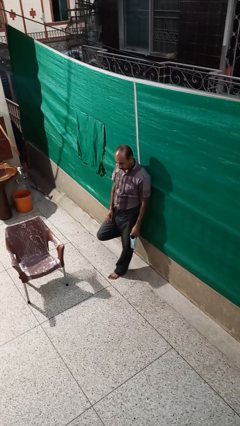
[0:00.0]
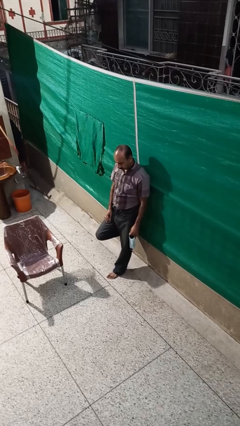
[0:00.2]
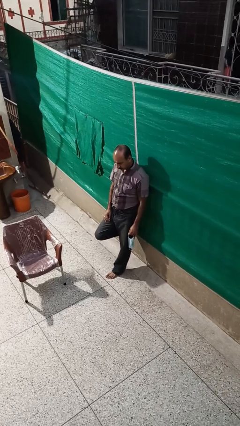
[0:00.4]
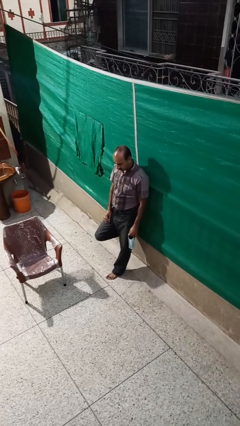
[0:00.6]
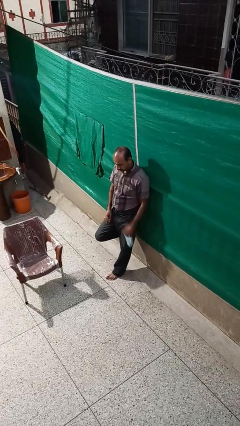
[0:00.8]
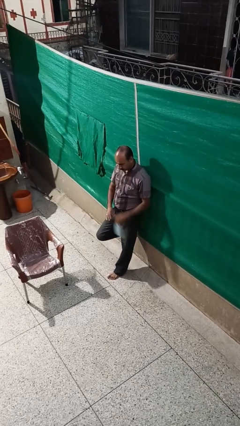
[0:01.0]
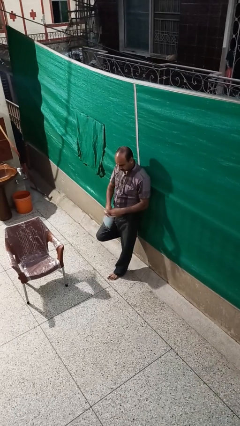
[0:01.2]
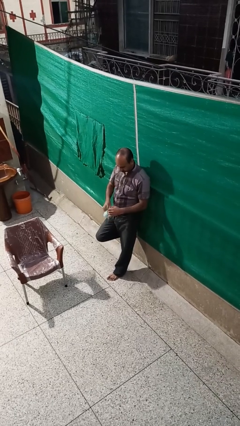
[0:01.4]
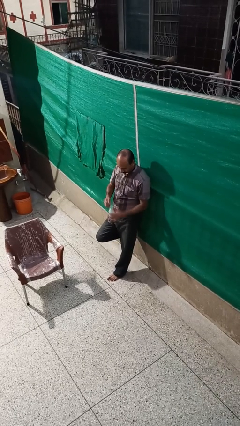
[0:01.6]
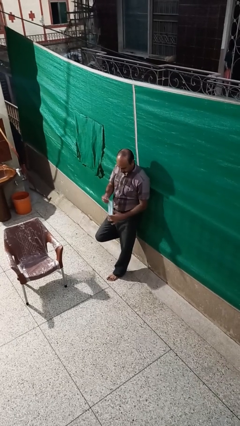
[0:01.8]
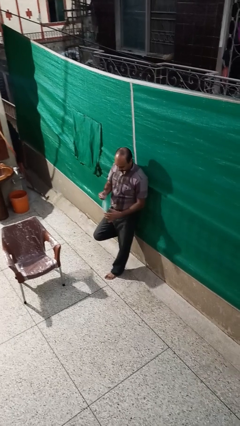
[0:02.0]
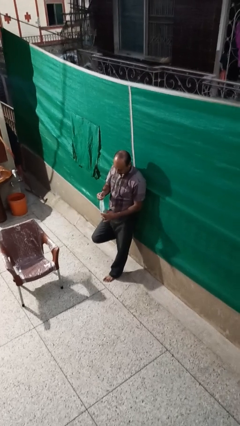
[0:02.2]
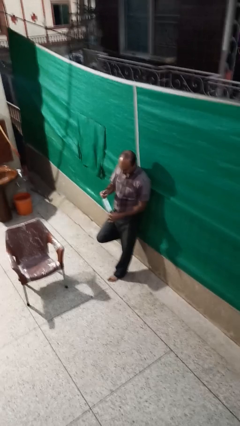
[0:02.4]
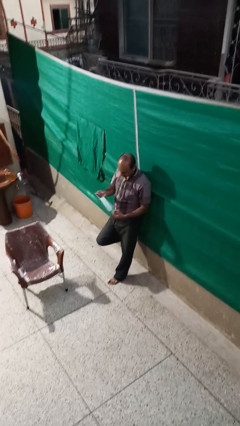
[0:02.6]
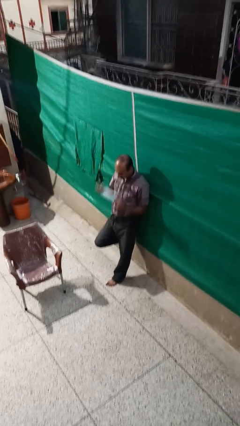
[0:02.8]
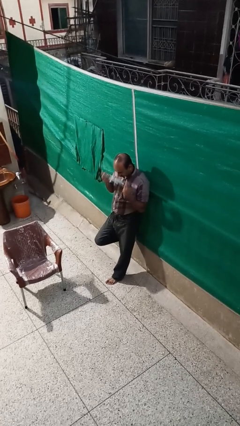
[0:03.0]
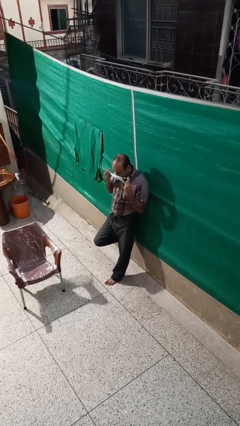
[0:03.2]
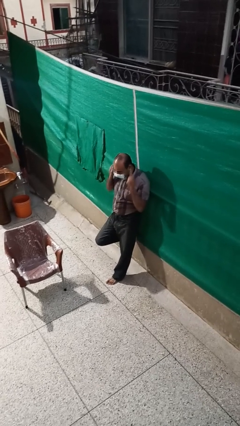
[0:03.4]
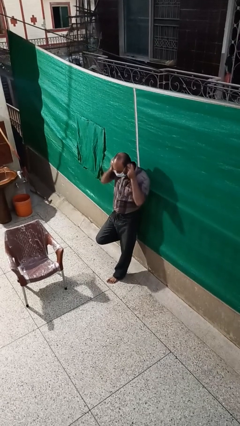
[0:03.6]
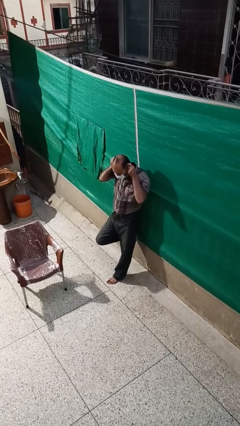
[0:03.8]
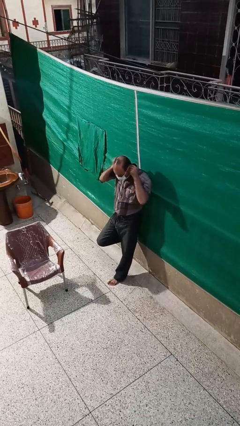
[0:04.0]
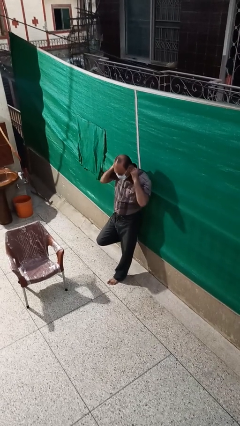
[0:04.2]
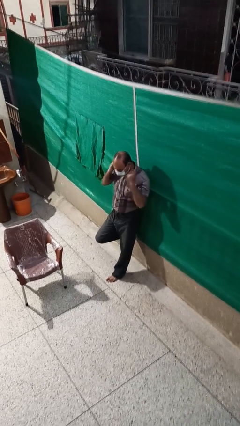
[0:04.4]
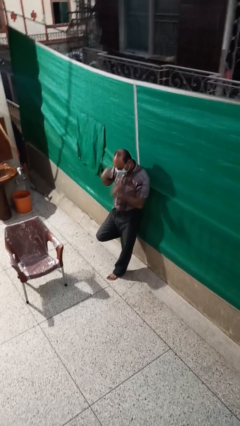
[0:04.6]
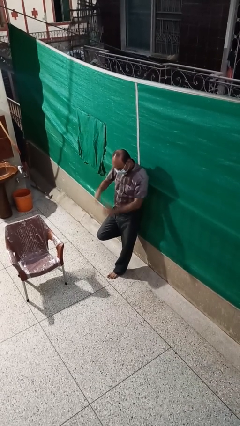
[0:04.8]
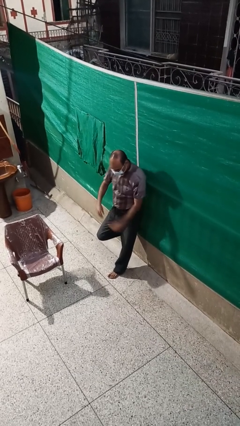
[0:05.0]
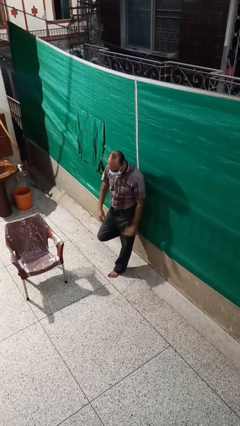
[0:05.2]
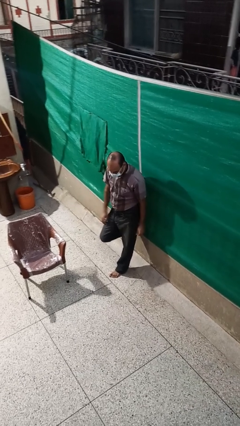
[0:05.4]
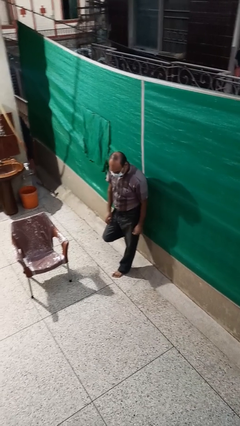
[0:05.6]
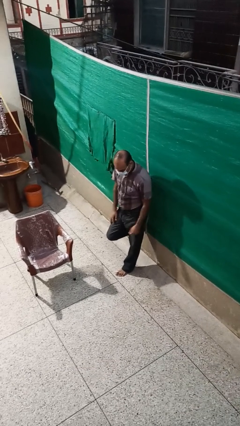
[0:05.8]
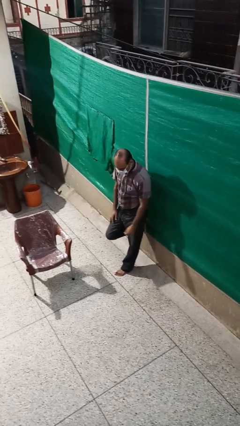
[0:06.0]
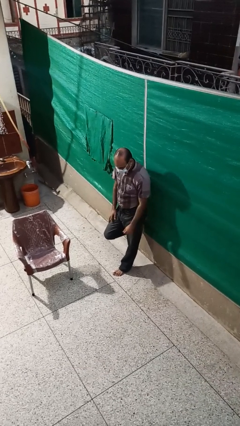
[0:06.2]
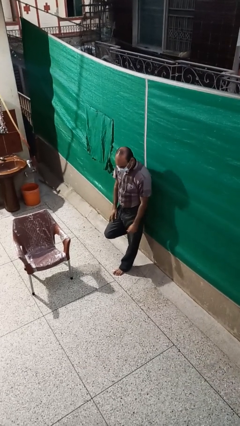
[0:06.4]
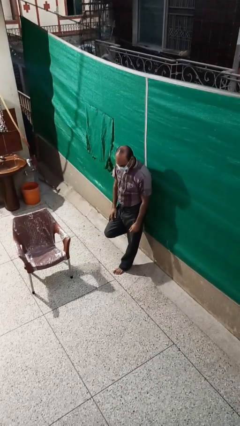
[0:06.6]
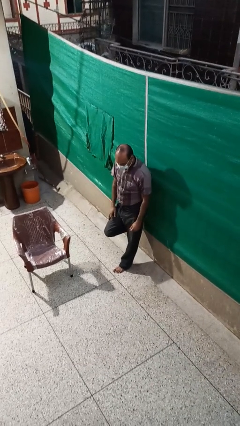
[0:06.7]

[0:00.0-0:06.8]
person puts on facemask

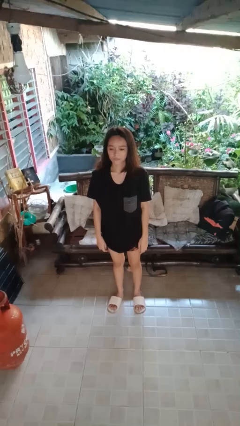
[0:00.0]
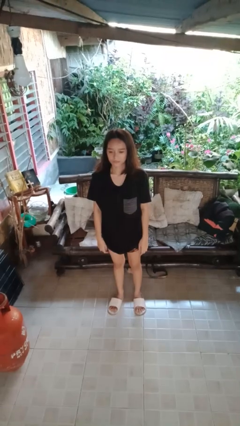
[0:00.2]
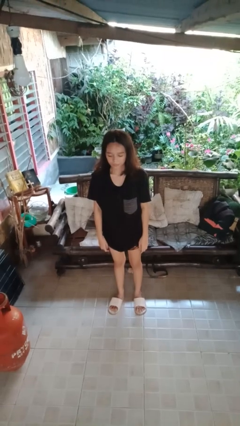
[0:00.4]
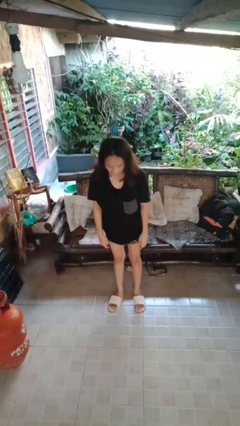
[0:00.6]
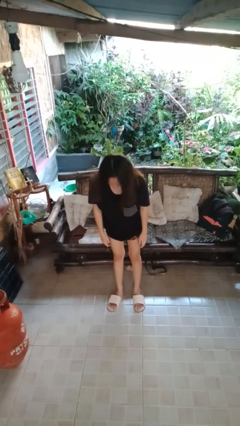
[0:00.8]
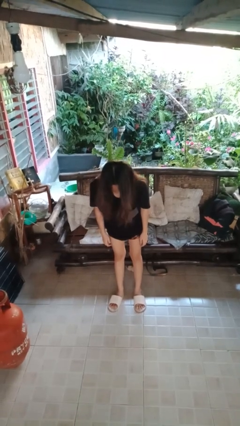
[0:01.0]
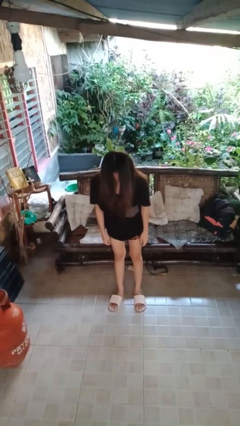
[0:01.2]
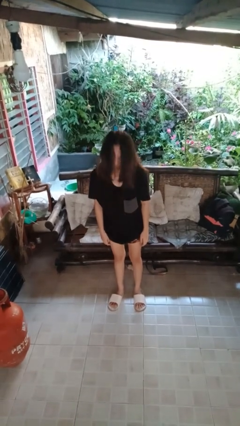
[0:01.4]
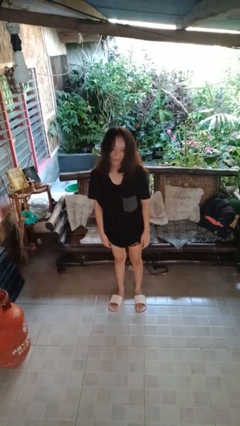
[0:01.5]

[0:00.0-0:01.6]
person bows

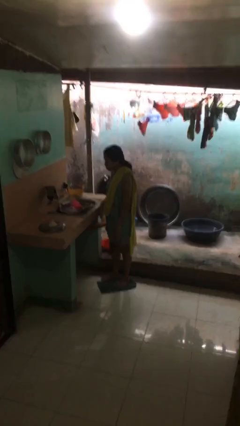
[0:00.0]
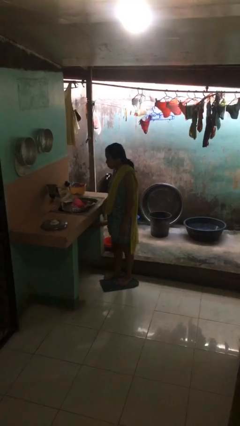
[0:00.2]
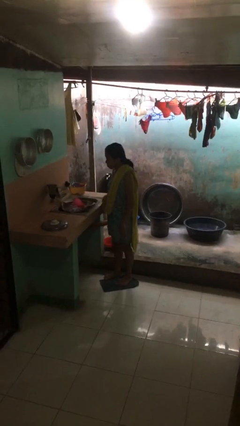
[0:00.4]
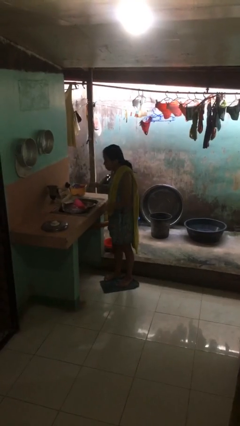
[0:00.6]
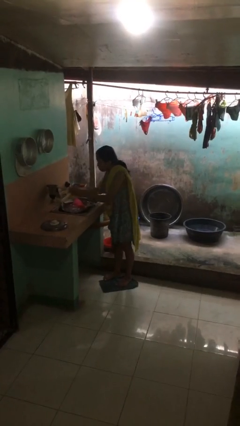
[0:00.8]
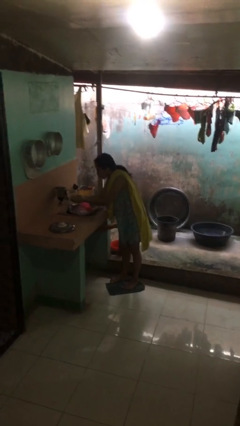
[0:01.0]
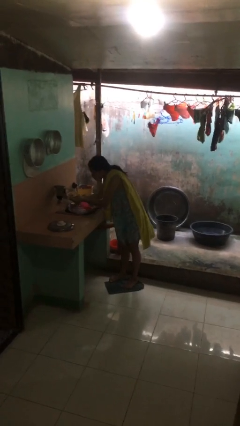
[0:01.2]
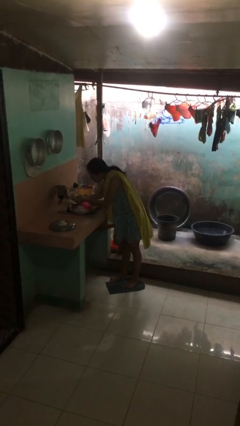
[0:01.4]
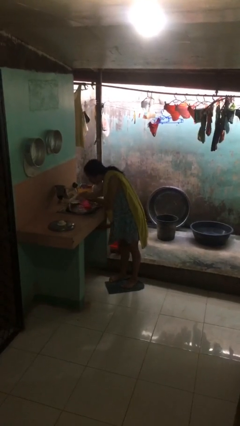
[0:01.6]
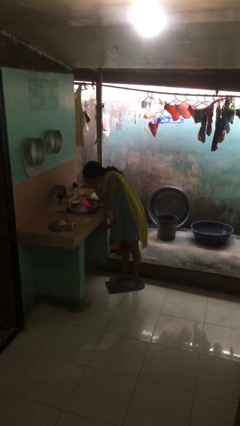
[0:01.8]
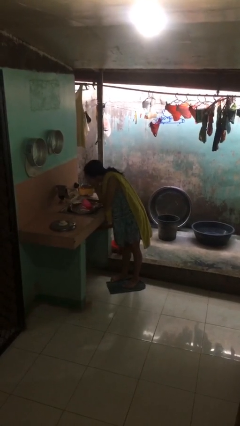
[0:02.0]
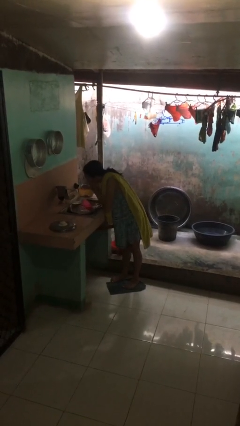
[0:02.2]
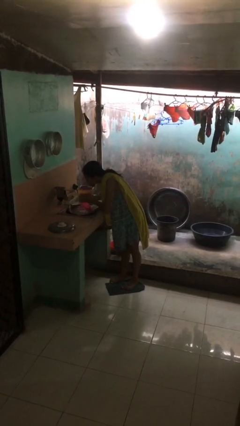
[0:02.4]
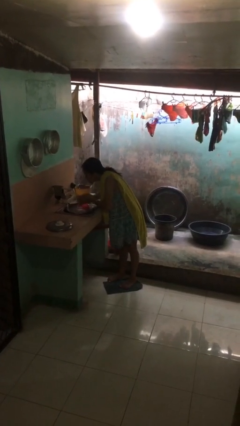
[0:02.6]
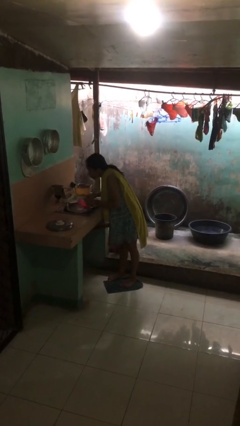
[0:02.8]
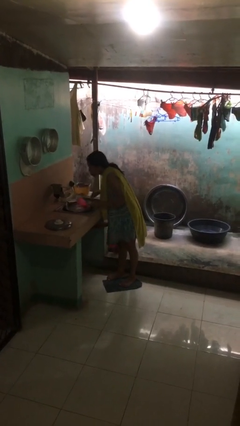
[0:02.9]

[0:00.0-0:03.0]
person washes face

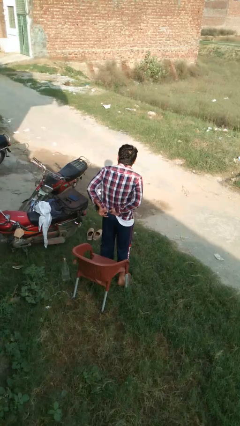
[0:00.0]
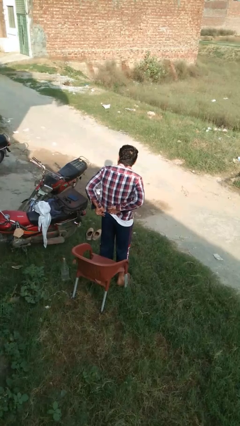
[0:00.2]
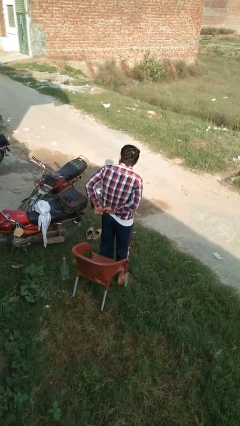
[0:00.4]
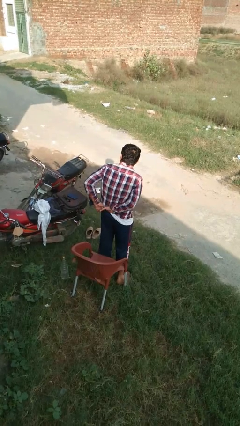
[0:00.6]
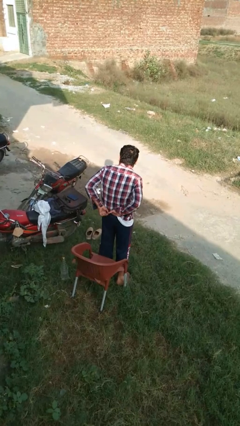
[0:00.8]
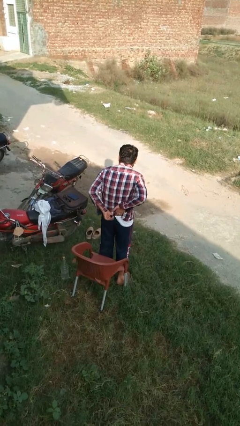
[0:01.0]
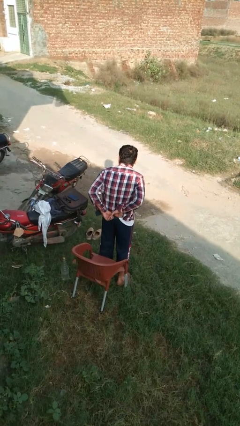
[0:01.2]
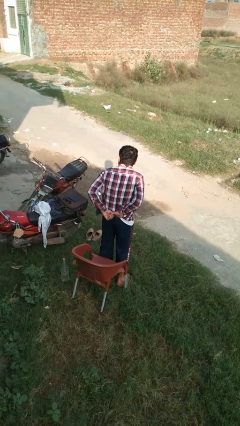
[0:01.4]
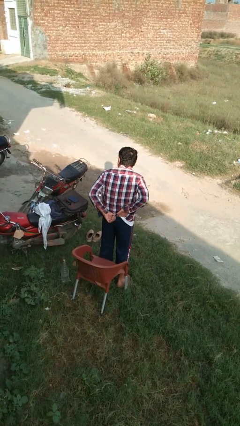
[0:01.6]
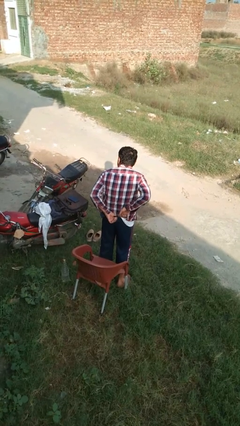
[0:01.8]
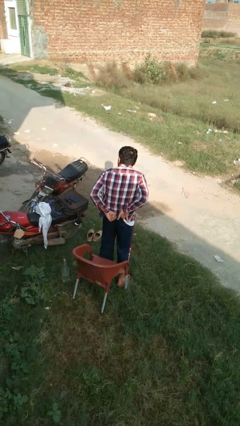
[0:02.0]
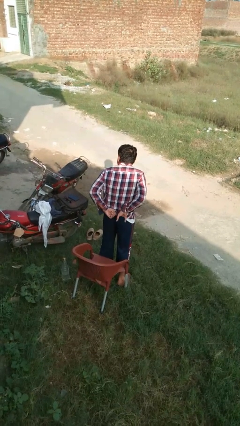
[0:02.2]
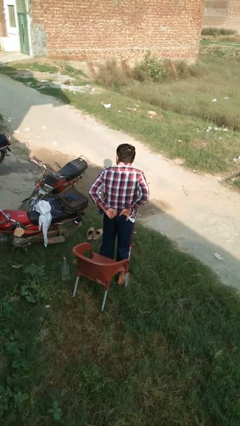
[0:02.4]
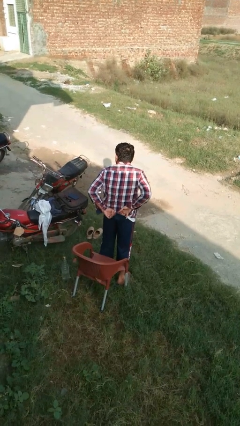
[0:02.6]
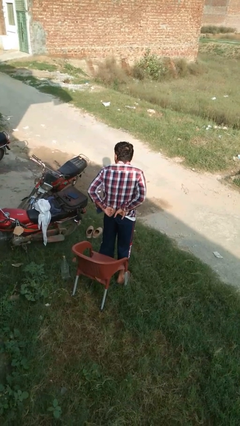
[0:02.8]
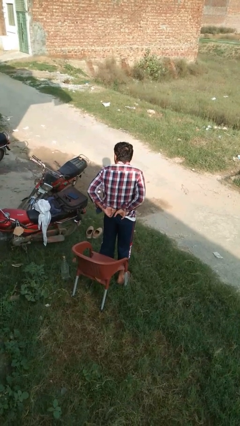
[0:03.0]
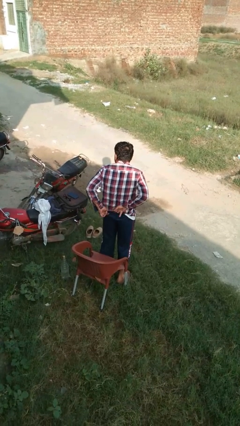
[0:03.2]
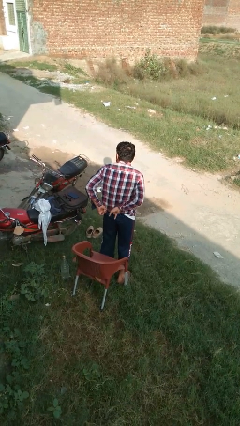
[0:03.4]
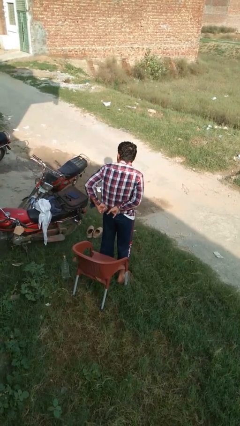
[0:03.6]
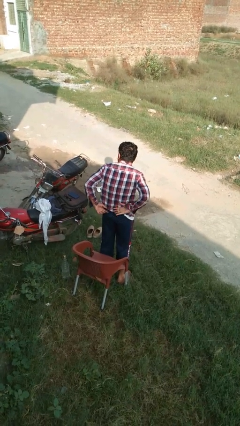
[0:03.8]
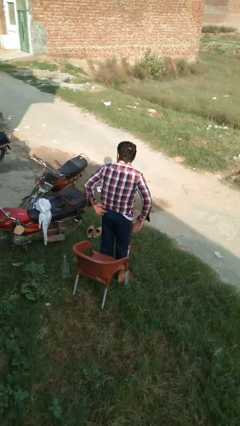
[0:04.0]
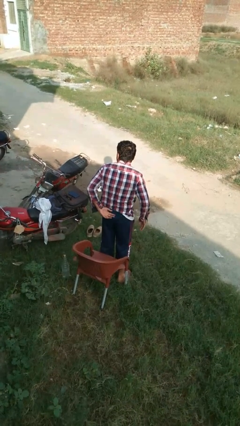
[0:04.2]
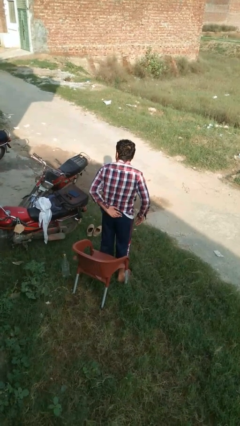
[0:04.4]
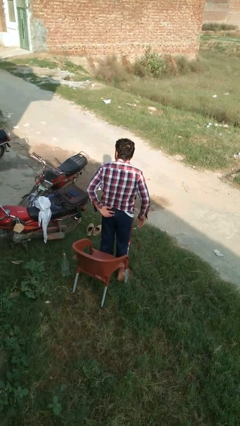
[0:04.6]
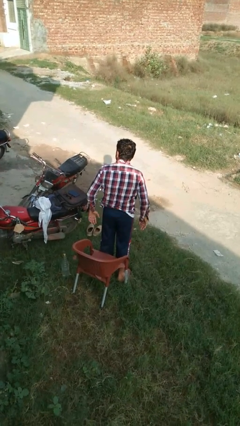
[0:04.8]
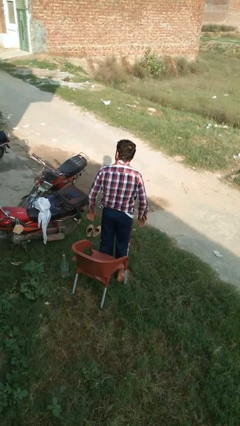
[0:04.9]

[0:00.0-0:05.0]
person tucks in shirt

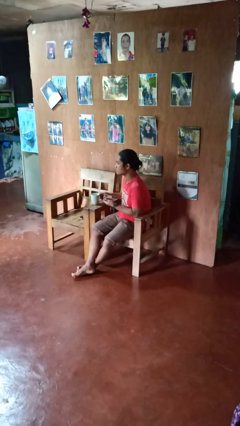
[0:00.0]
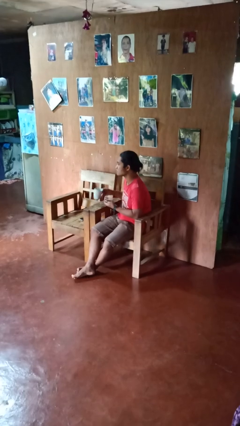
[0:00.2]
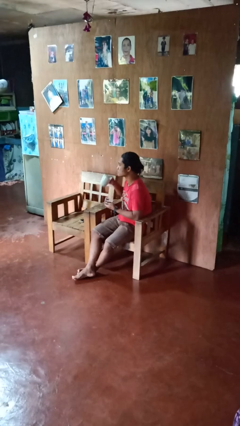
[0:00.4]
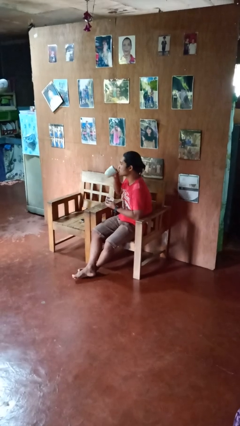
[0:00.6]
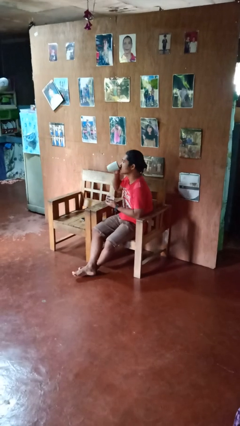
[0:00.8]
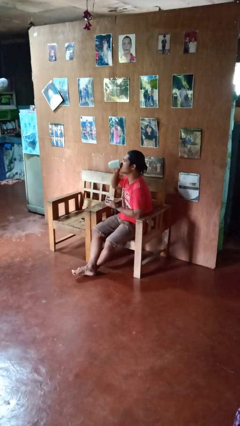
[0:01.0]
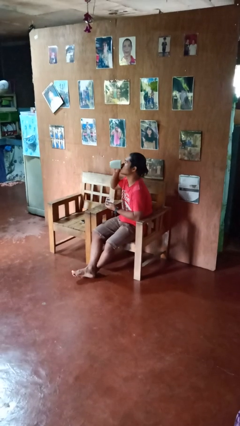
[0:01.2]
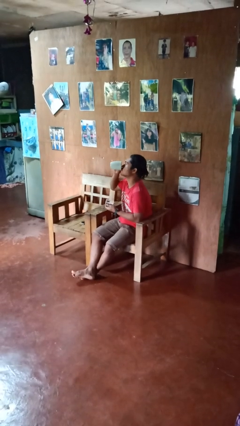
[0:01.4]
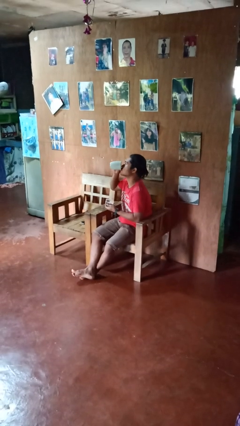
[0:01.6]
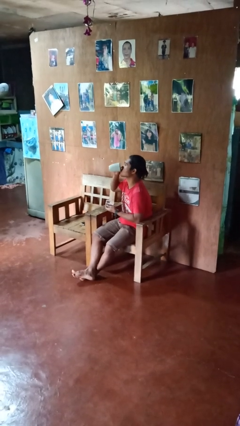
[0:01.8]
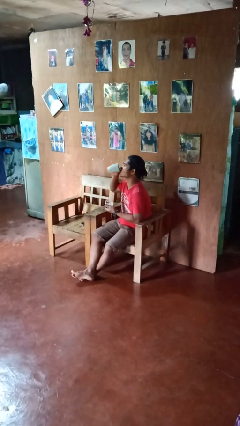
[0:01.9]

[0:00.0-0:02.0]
person drinks from cup
